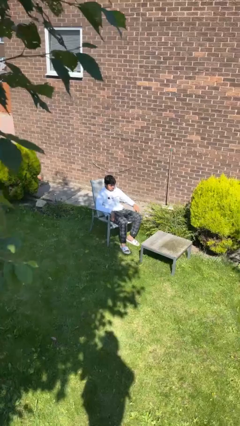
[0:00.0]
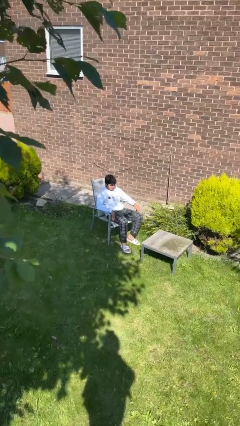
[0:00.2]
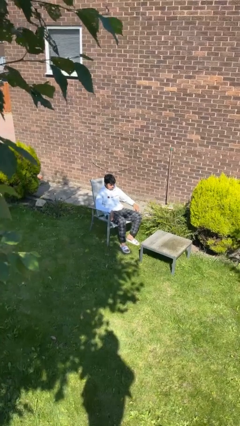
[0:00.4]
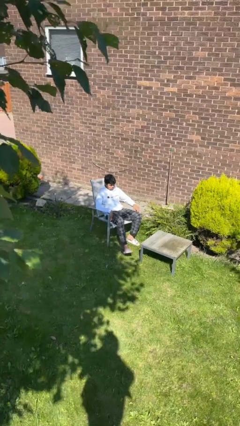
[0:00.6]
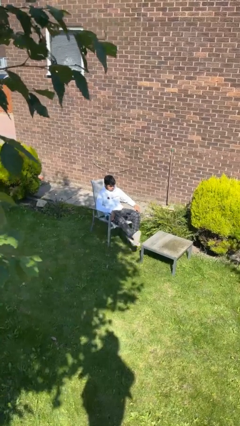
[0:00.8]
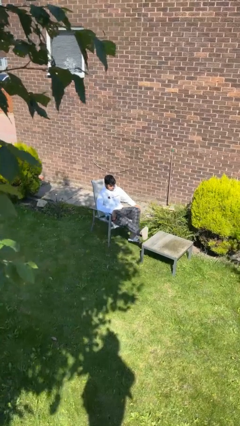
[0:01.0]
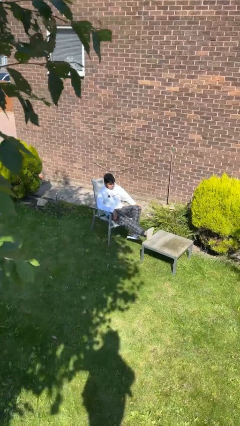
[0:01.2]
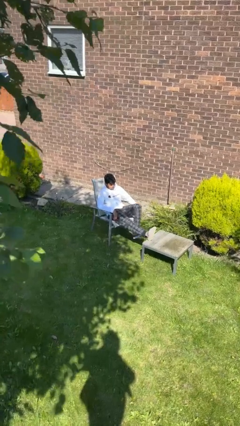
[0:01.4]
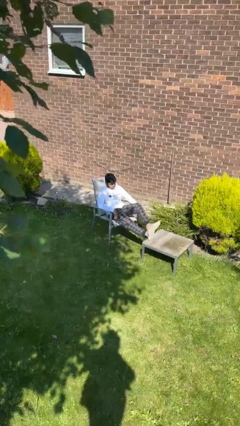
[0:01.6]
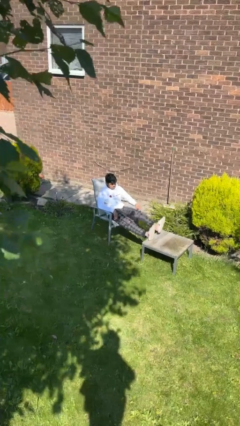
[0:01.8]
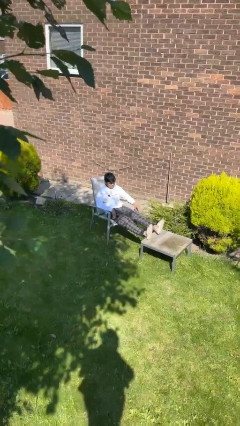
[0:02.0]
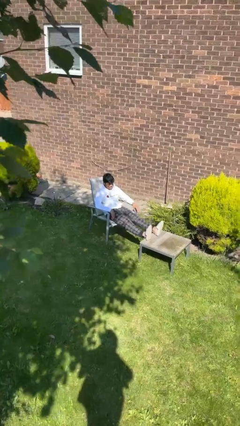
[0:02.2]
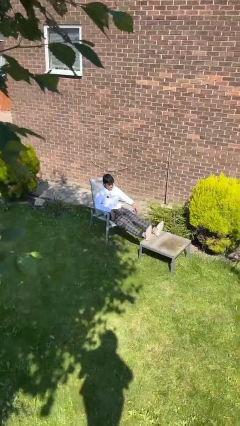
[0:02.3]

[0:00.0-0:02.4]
person puts feet up

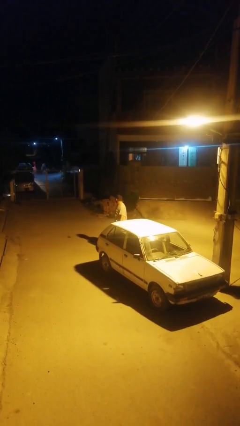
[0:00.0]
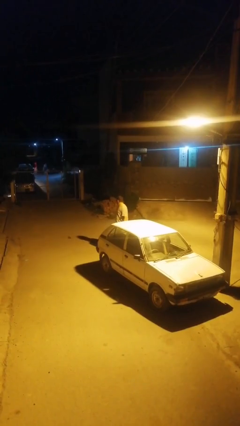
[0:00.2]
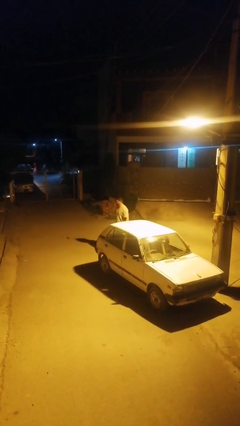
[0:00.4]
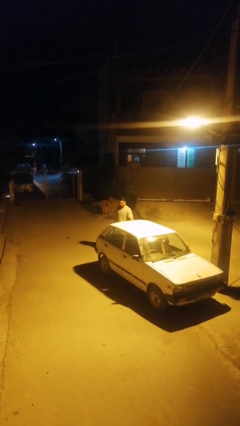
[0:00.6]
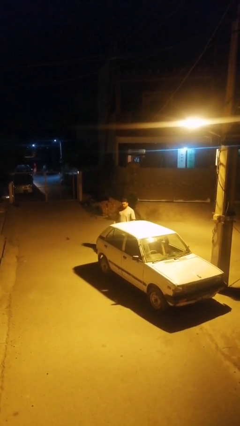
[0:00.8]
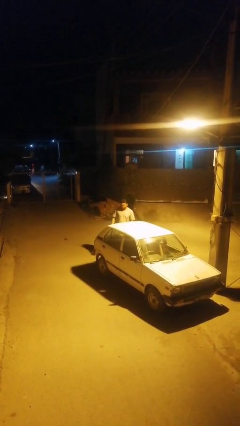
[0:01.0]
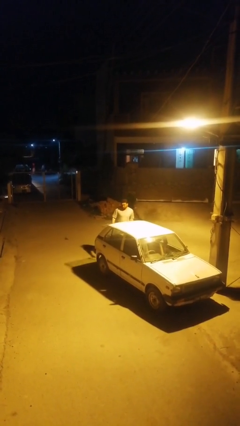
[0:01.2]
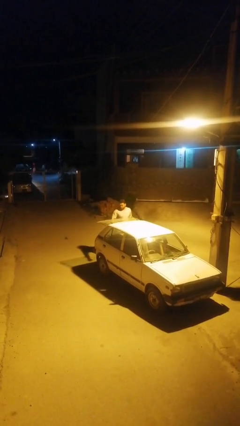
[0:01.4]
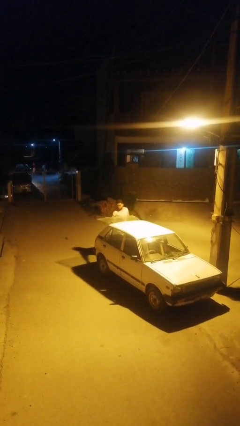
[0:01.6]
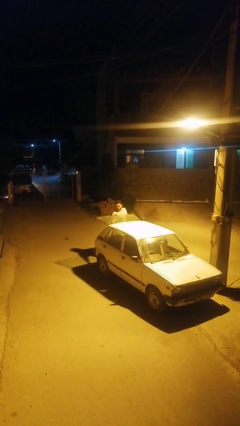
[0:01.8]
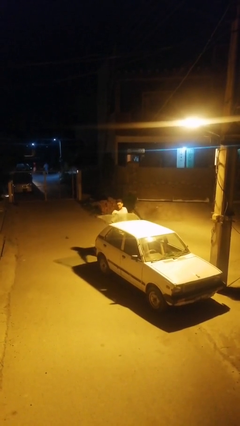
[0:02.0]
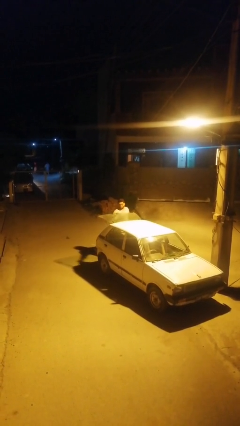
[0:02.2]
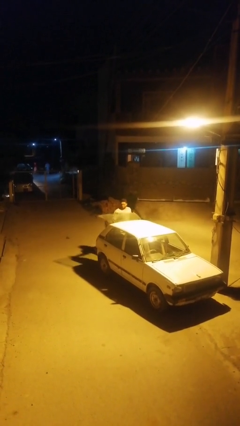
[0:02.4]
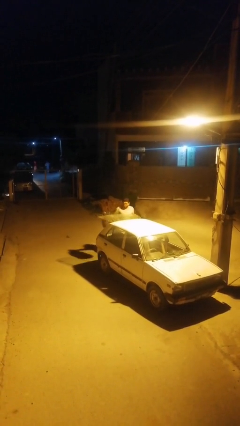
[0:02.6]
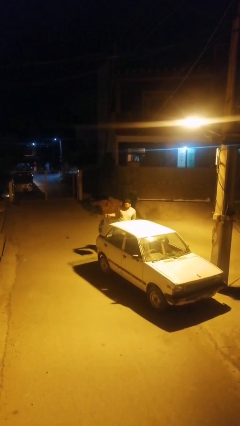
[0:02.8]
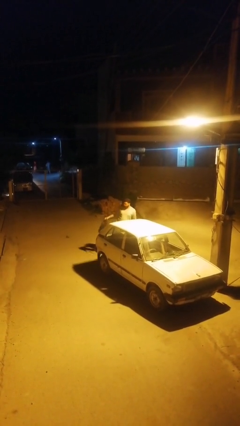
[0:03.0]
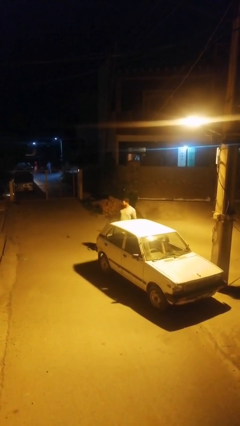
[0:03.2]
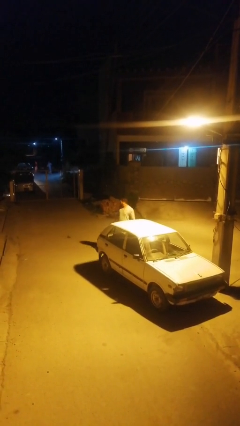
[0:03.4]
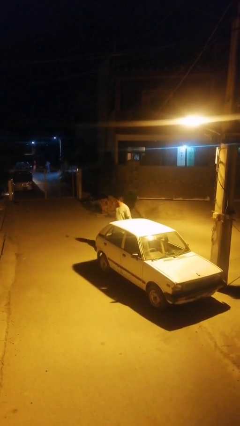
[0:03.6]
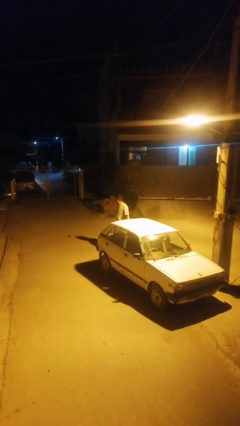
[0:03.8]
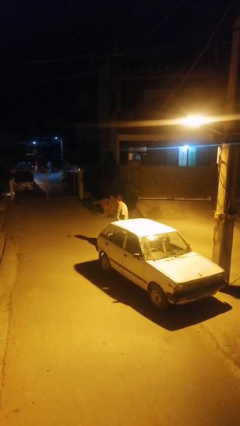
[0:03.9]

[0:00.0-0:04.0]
person unloads car

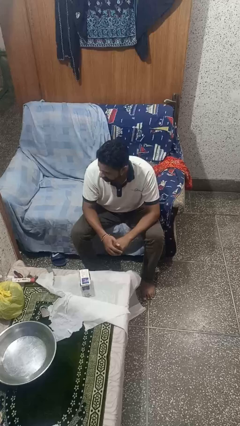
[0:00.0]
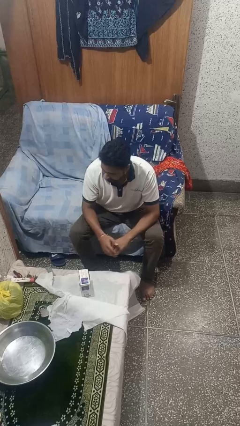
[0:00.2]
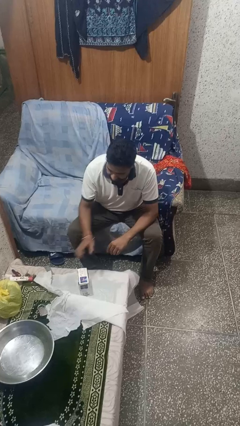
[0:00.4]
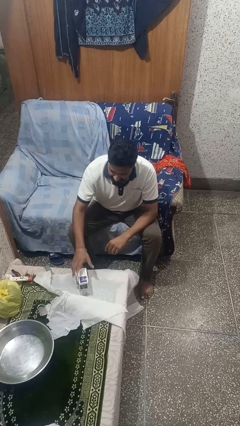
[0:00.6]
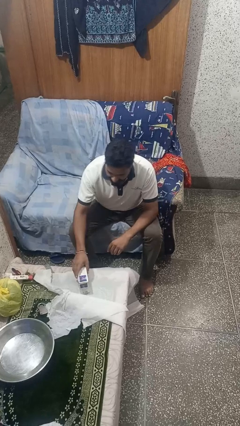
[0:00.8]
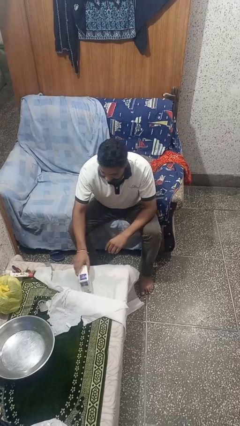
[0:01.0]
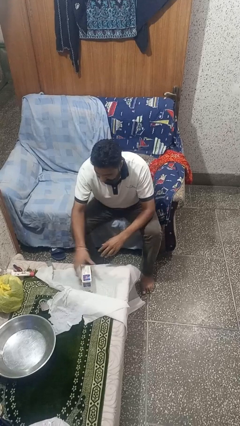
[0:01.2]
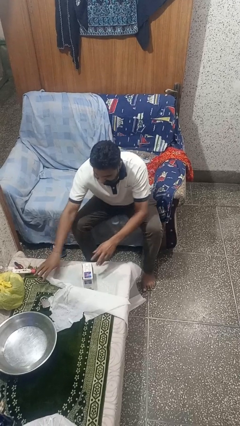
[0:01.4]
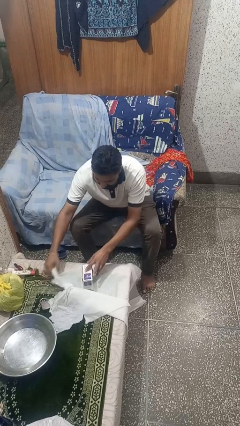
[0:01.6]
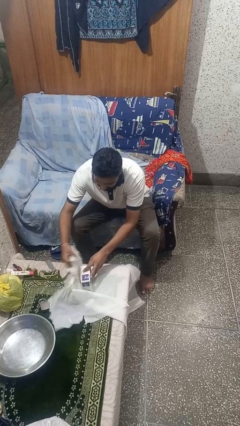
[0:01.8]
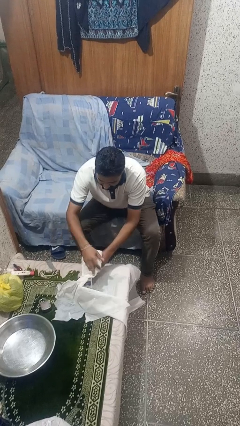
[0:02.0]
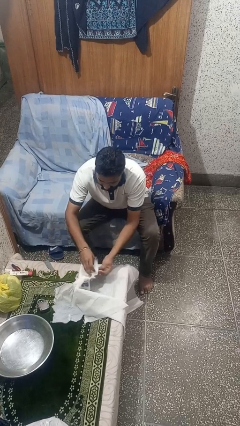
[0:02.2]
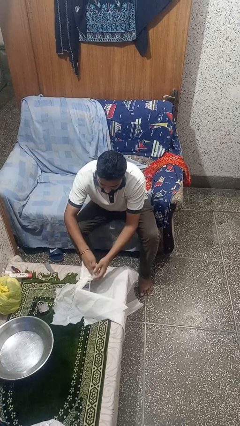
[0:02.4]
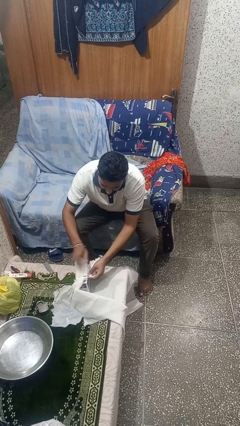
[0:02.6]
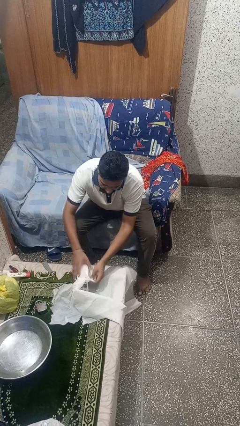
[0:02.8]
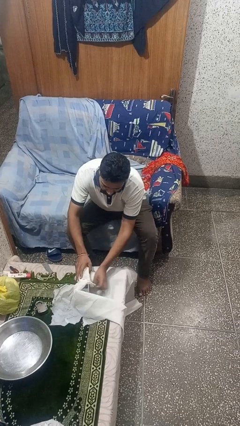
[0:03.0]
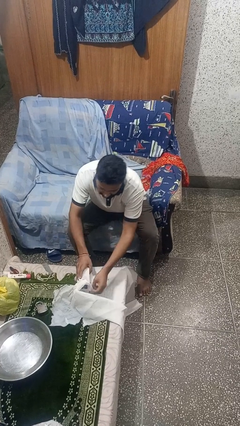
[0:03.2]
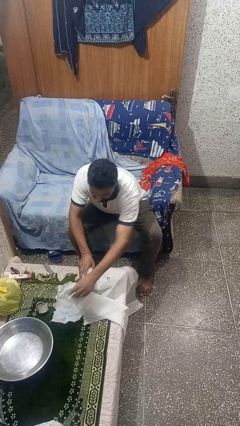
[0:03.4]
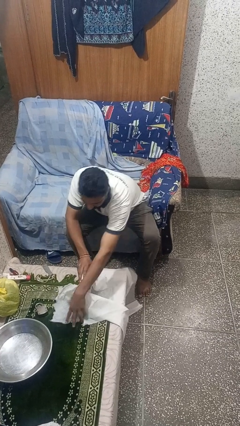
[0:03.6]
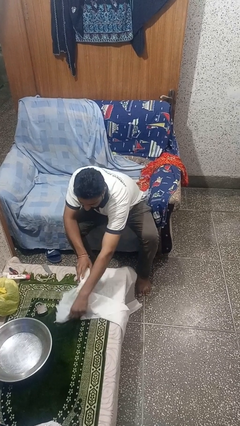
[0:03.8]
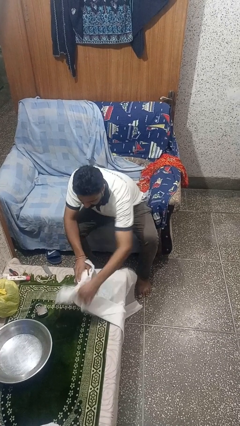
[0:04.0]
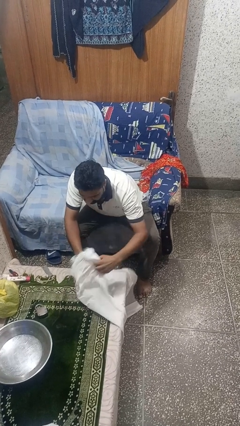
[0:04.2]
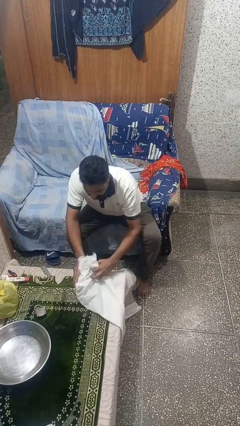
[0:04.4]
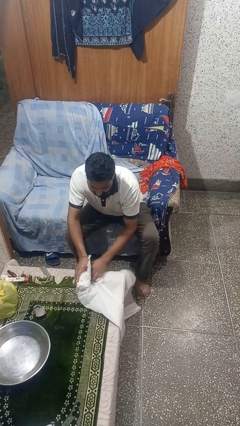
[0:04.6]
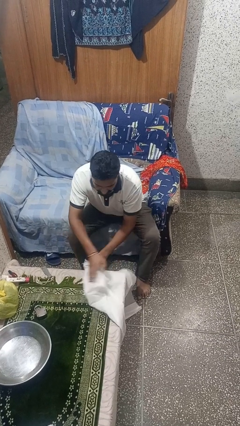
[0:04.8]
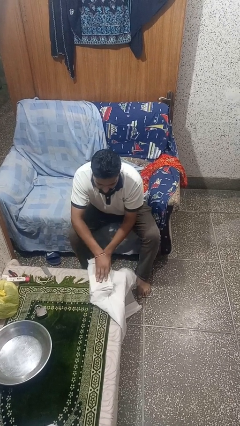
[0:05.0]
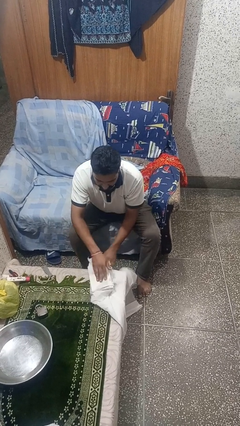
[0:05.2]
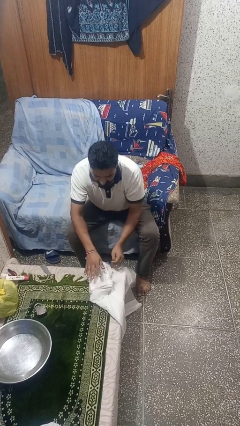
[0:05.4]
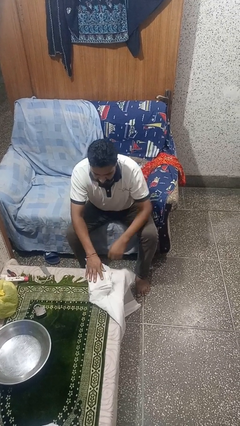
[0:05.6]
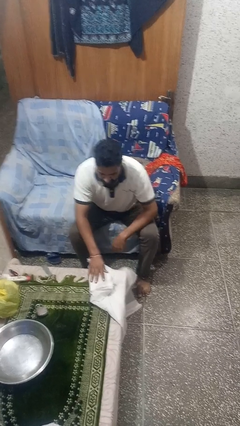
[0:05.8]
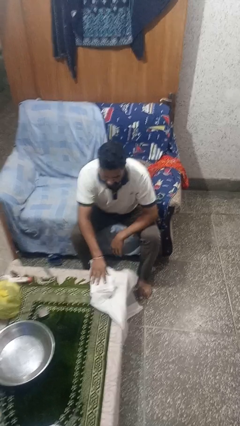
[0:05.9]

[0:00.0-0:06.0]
person wraps box

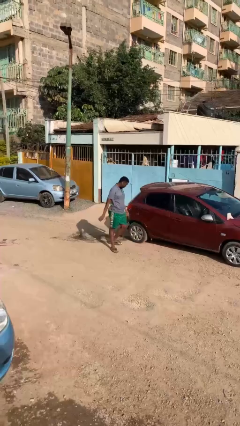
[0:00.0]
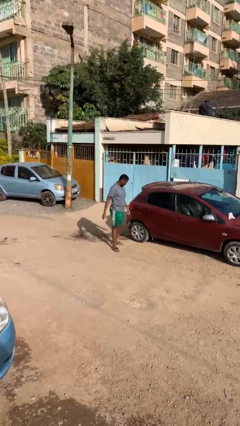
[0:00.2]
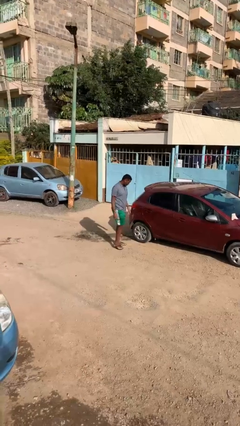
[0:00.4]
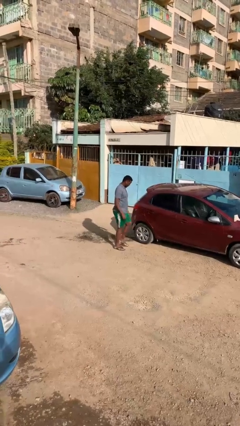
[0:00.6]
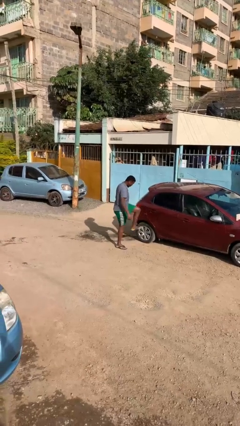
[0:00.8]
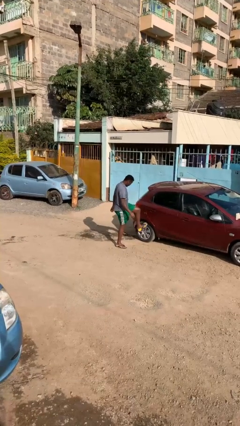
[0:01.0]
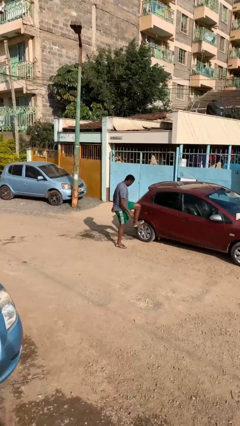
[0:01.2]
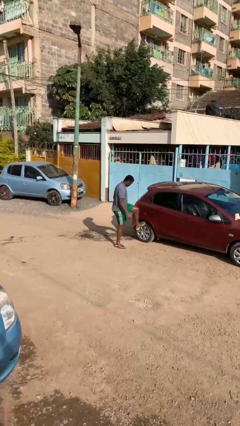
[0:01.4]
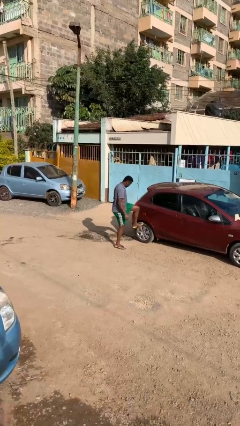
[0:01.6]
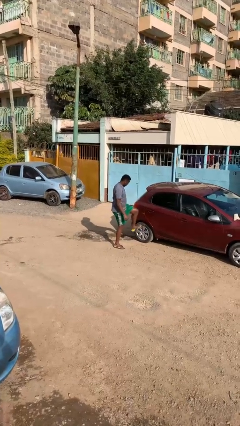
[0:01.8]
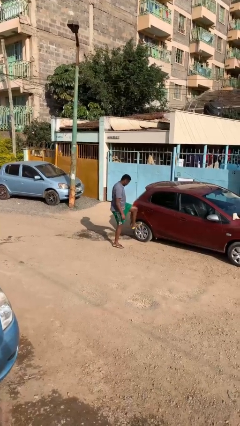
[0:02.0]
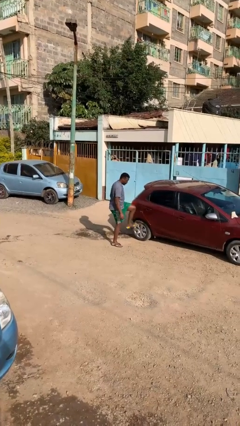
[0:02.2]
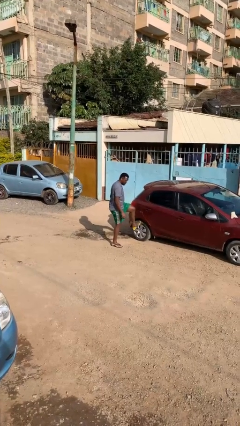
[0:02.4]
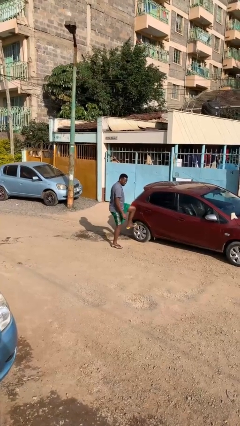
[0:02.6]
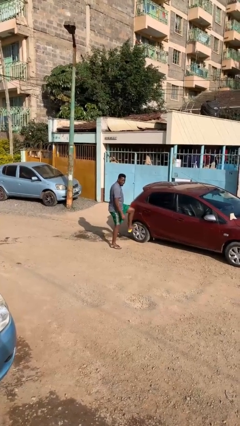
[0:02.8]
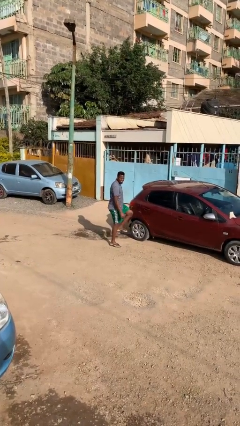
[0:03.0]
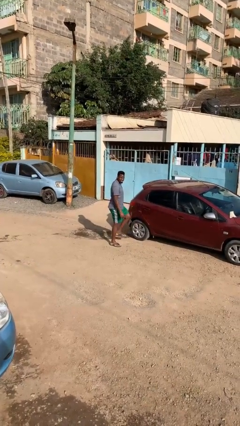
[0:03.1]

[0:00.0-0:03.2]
person kicks car tires

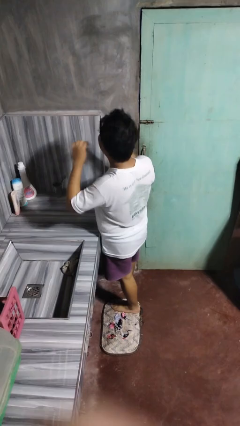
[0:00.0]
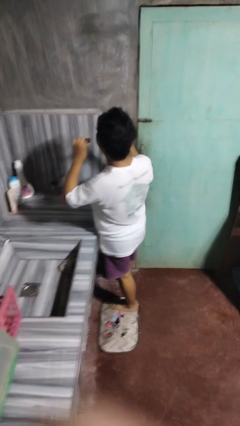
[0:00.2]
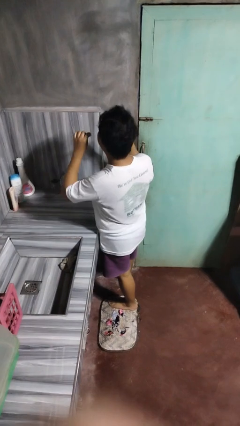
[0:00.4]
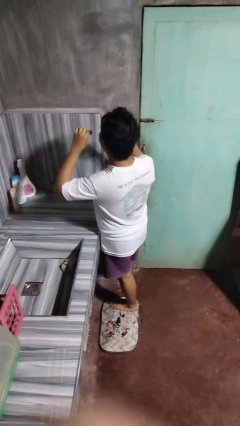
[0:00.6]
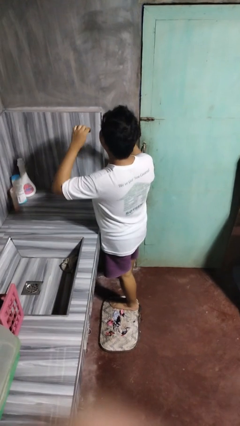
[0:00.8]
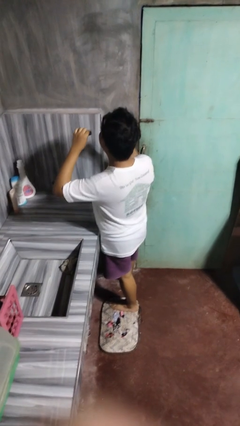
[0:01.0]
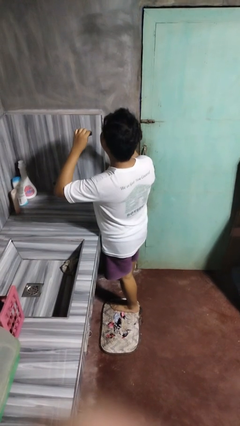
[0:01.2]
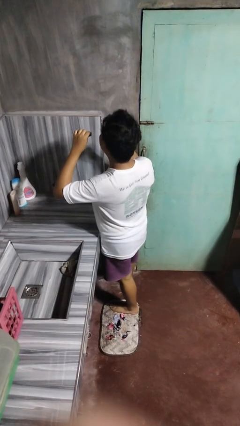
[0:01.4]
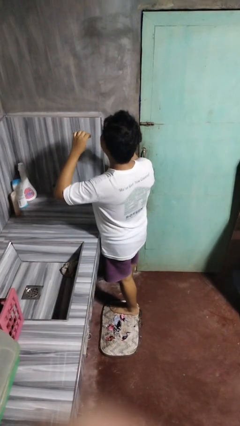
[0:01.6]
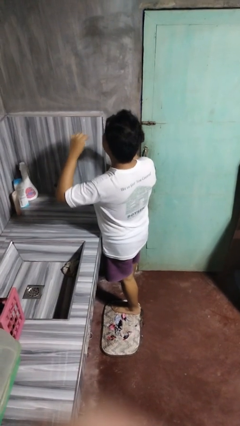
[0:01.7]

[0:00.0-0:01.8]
person flosses
